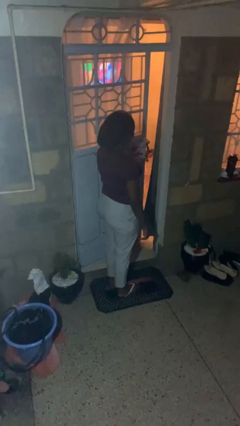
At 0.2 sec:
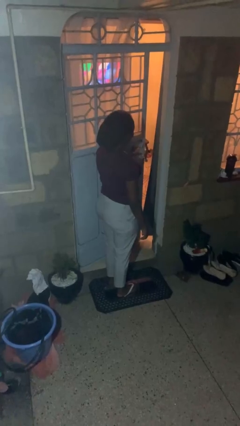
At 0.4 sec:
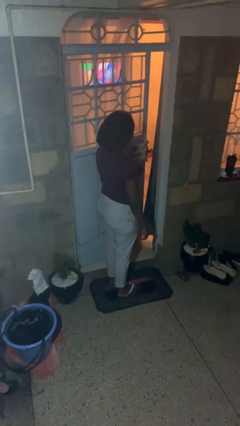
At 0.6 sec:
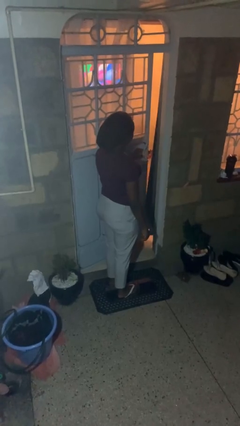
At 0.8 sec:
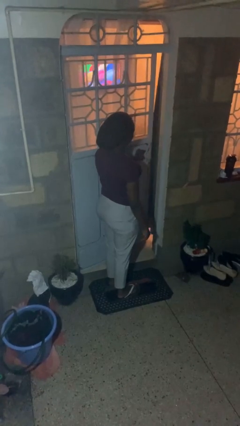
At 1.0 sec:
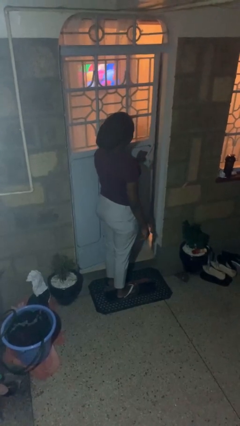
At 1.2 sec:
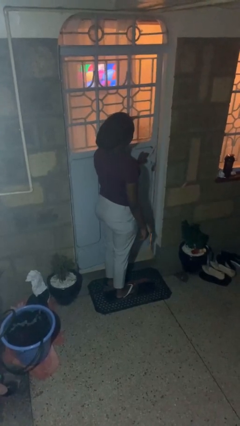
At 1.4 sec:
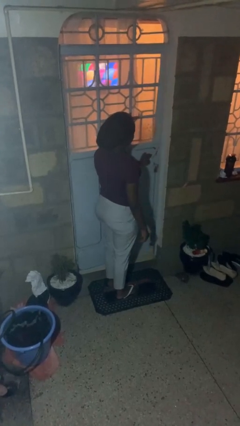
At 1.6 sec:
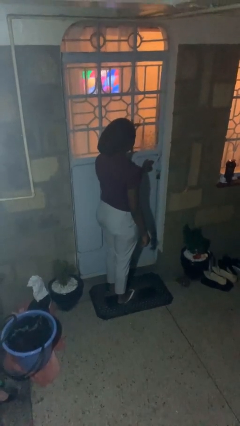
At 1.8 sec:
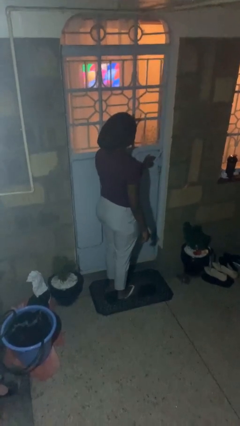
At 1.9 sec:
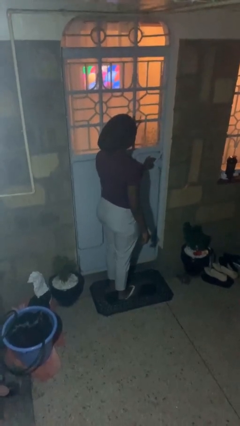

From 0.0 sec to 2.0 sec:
person closes facility door

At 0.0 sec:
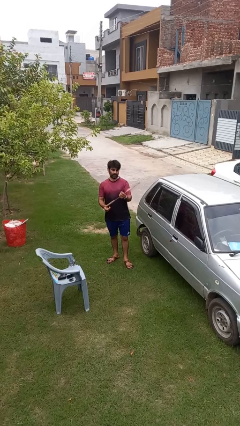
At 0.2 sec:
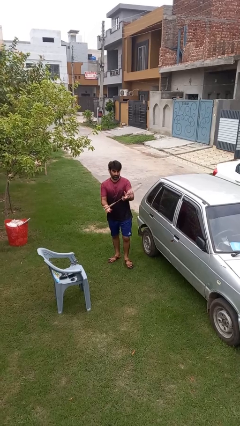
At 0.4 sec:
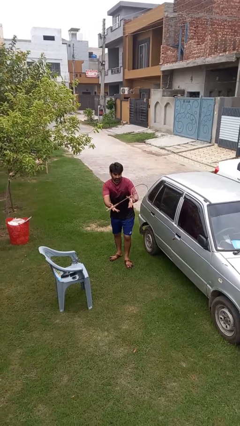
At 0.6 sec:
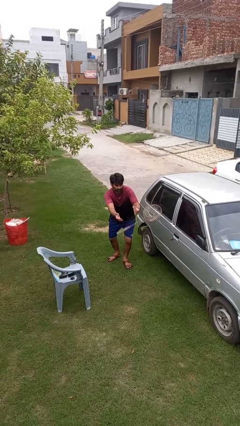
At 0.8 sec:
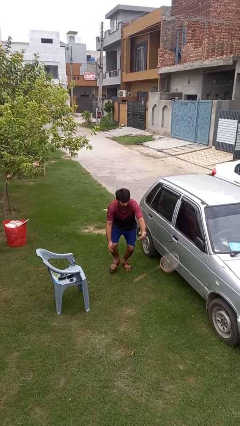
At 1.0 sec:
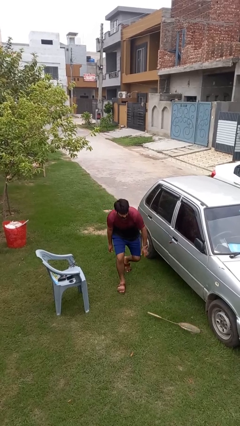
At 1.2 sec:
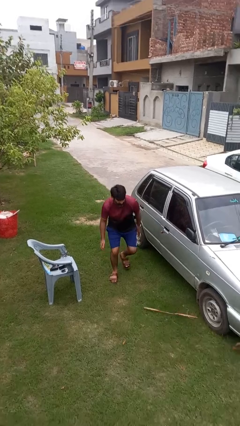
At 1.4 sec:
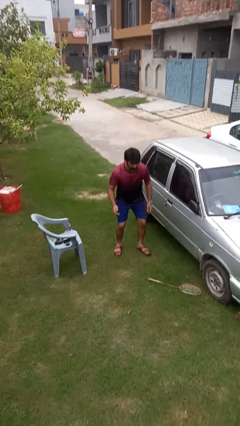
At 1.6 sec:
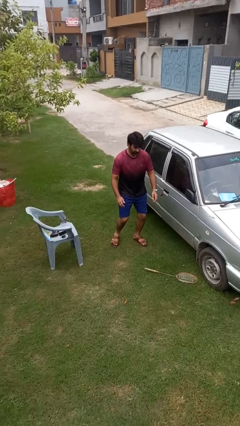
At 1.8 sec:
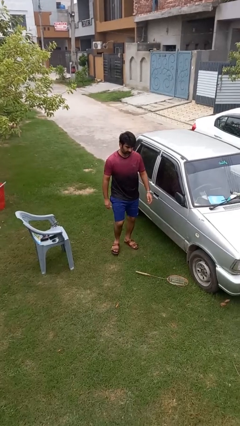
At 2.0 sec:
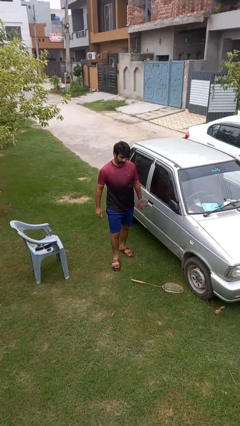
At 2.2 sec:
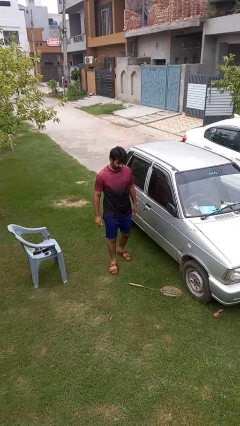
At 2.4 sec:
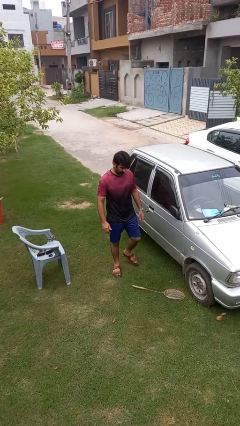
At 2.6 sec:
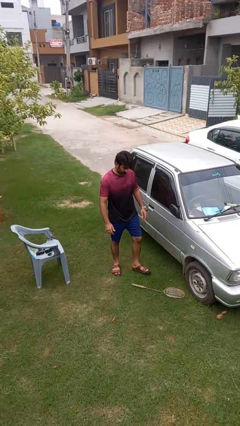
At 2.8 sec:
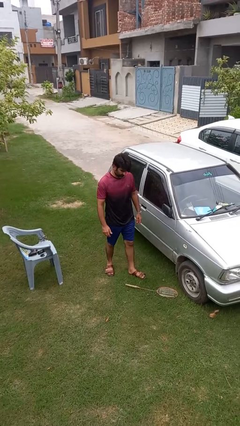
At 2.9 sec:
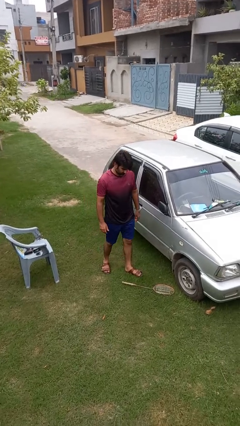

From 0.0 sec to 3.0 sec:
person drops object

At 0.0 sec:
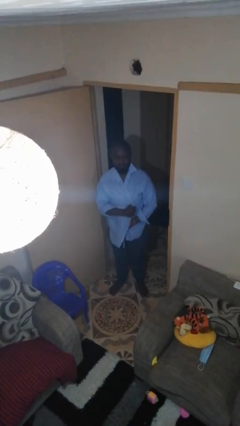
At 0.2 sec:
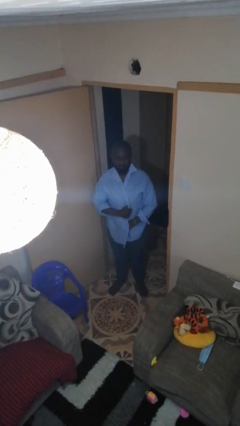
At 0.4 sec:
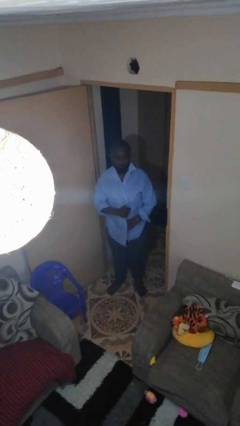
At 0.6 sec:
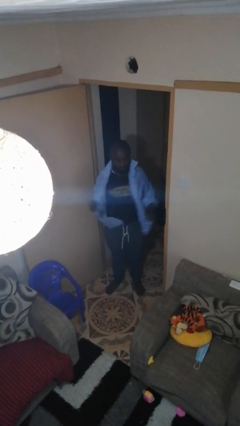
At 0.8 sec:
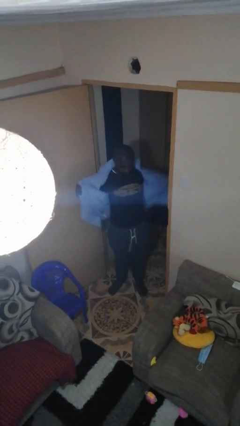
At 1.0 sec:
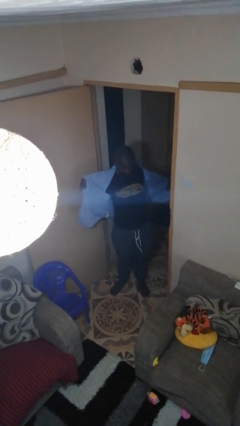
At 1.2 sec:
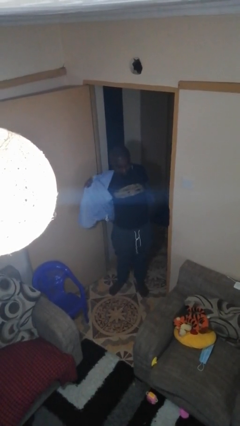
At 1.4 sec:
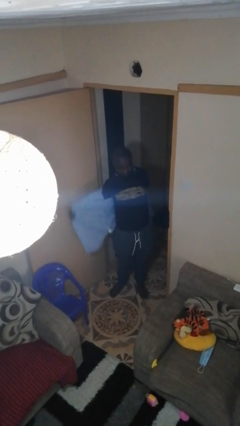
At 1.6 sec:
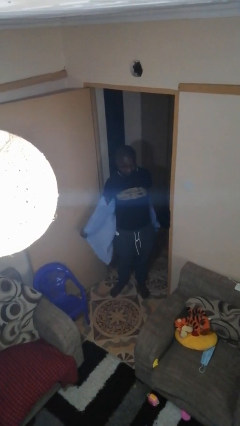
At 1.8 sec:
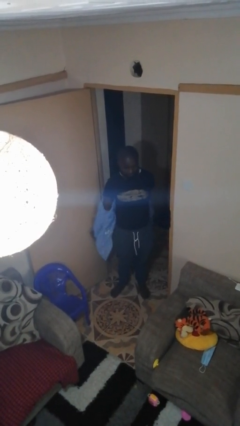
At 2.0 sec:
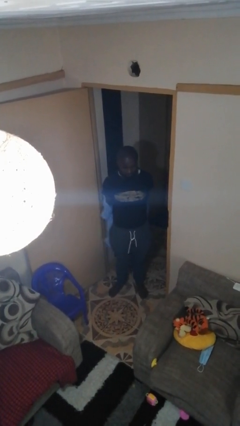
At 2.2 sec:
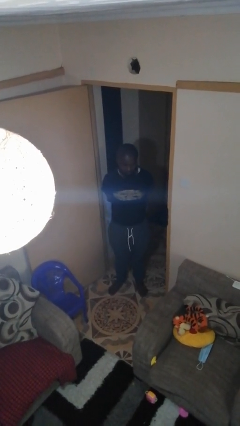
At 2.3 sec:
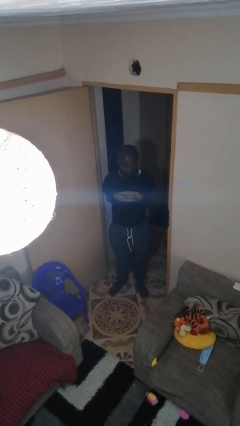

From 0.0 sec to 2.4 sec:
person takes off shirt

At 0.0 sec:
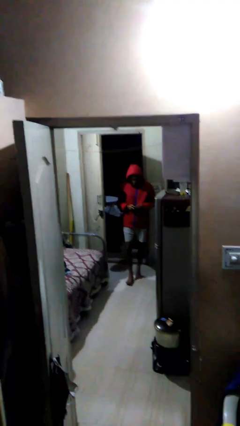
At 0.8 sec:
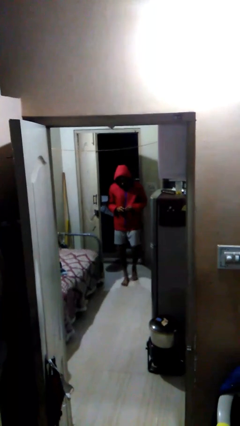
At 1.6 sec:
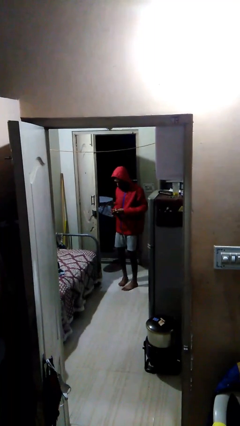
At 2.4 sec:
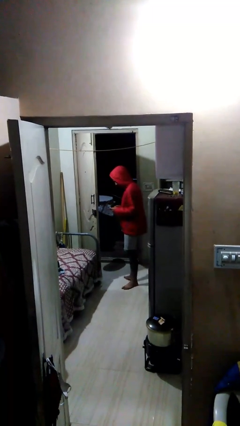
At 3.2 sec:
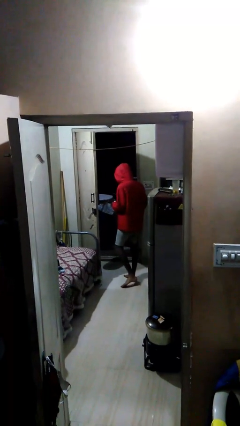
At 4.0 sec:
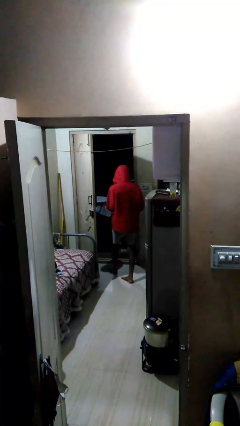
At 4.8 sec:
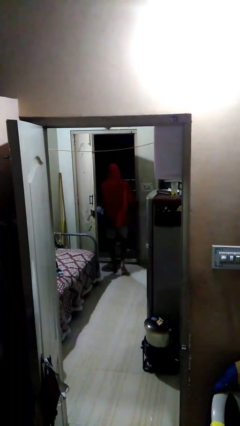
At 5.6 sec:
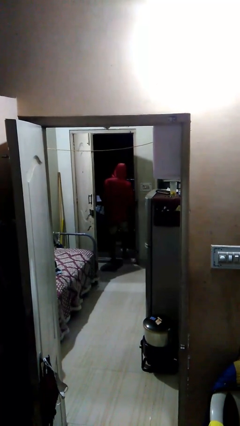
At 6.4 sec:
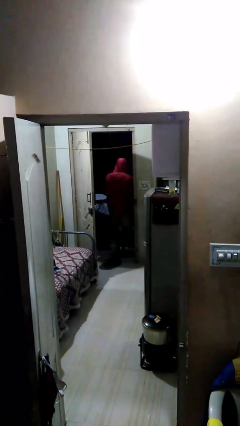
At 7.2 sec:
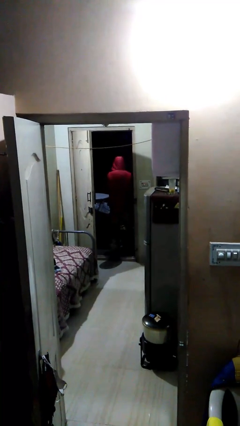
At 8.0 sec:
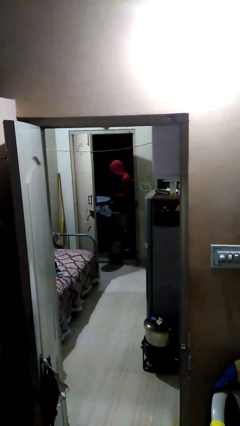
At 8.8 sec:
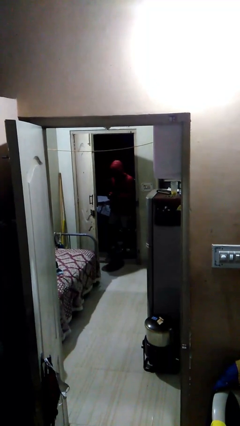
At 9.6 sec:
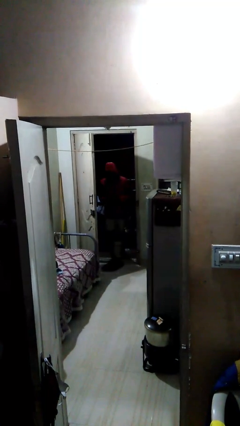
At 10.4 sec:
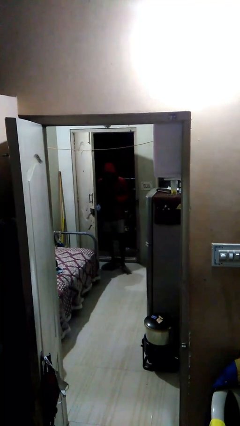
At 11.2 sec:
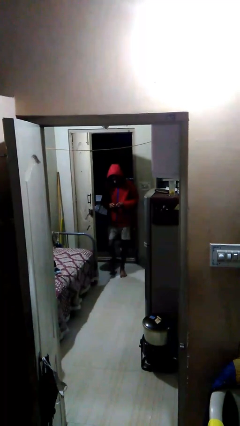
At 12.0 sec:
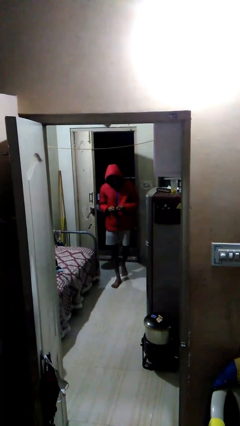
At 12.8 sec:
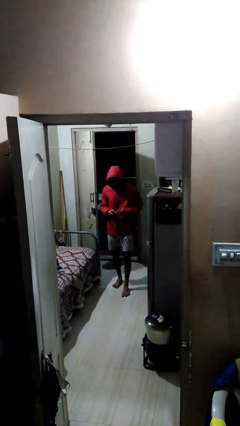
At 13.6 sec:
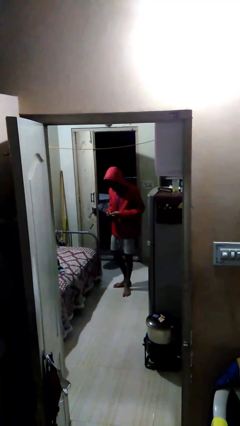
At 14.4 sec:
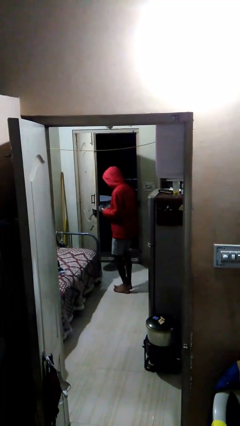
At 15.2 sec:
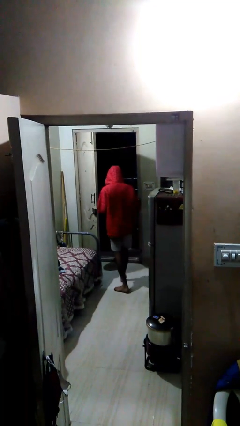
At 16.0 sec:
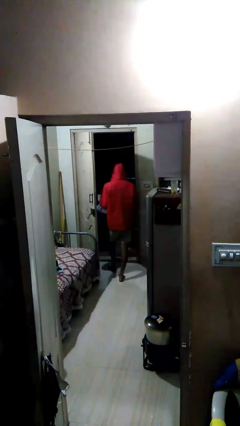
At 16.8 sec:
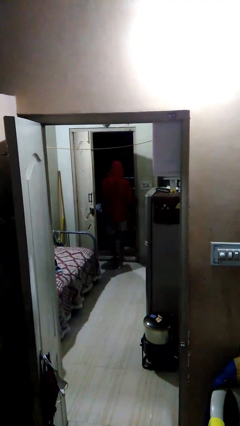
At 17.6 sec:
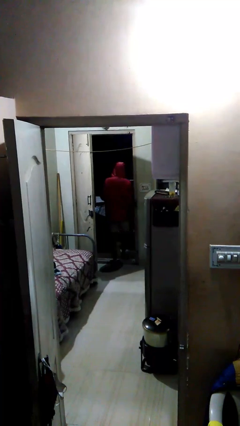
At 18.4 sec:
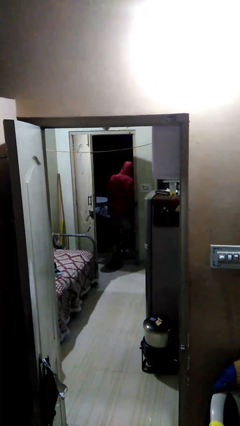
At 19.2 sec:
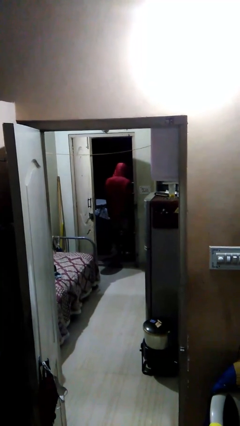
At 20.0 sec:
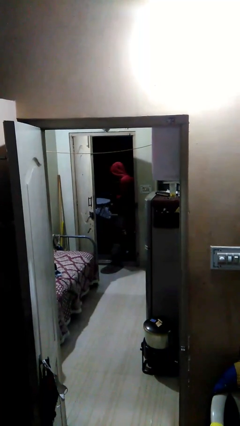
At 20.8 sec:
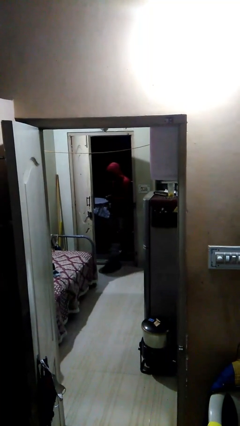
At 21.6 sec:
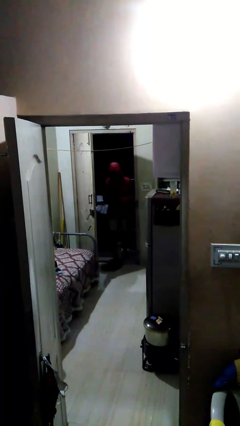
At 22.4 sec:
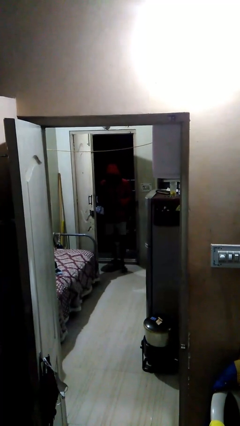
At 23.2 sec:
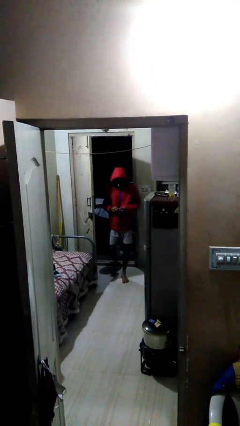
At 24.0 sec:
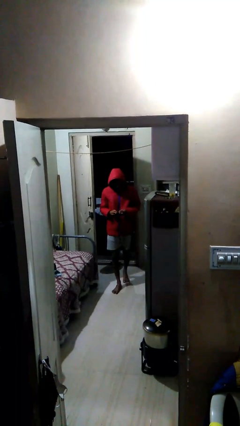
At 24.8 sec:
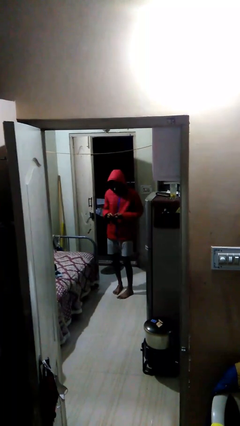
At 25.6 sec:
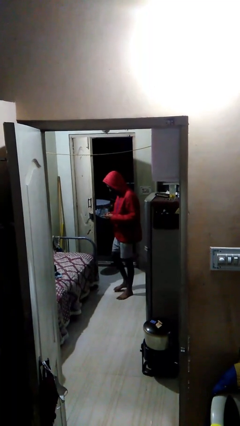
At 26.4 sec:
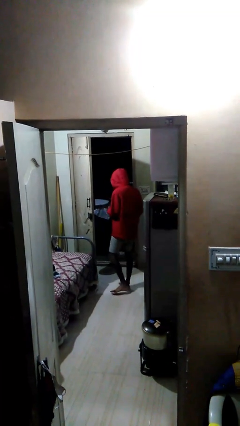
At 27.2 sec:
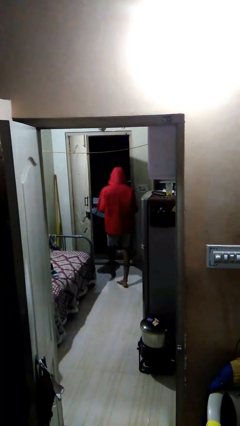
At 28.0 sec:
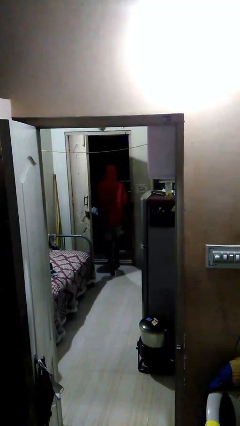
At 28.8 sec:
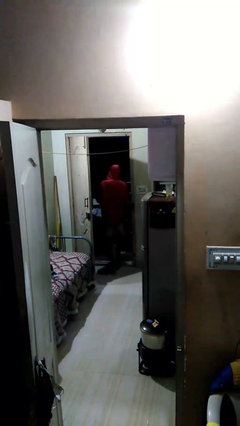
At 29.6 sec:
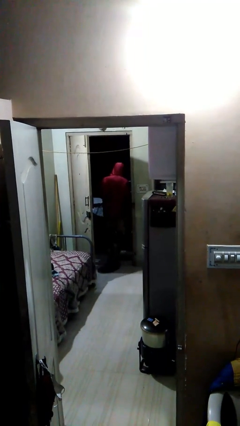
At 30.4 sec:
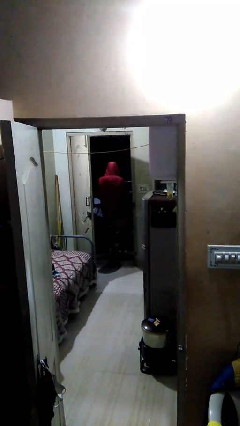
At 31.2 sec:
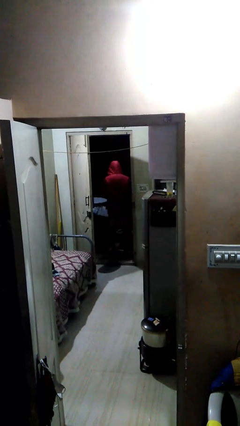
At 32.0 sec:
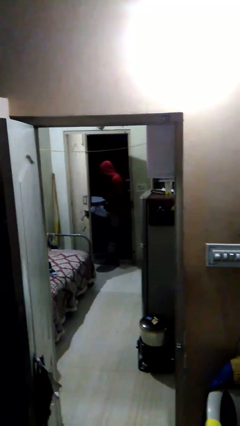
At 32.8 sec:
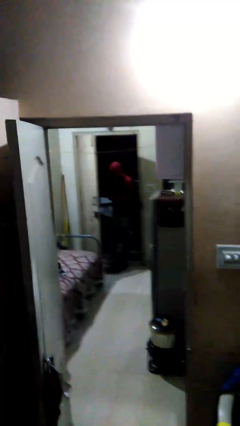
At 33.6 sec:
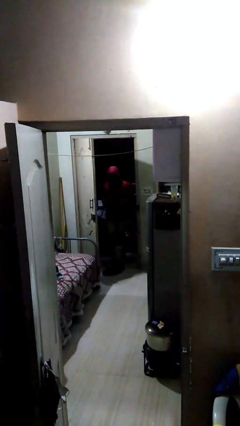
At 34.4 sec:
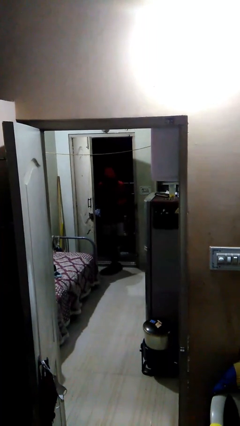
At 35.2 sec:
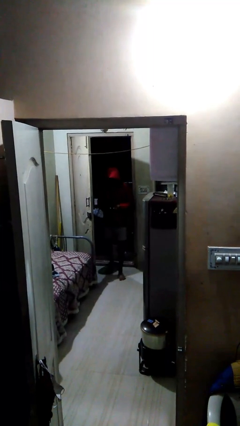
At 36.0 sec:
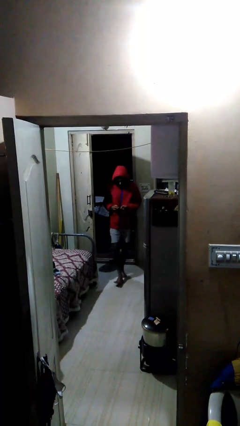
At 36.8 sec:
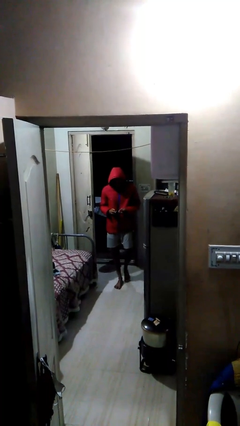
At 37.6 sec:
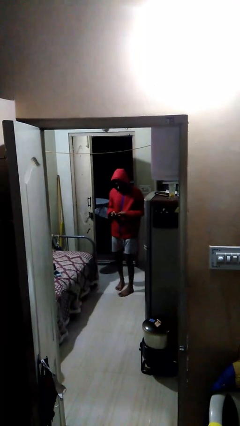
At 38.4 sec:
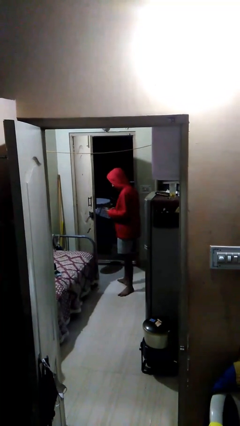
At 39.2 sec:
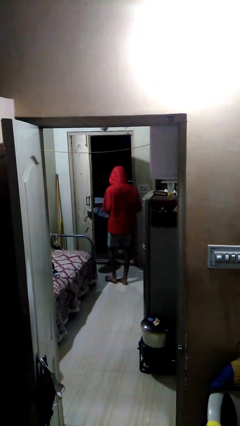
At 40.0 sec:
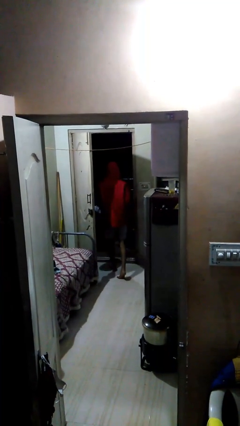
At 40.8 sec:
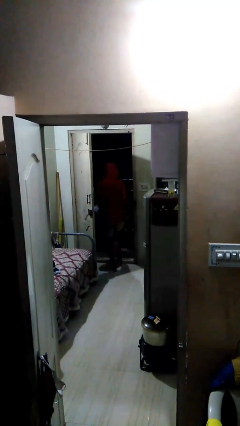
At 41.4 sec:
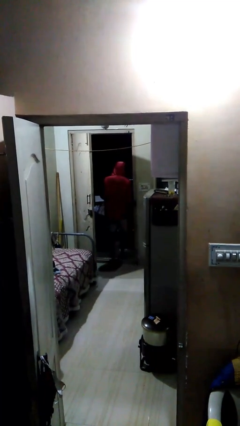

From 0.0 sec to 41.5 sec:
person texts on phone
